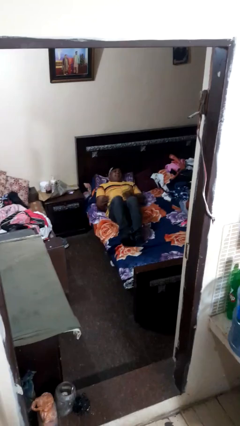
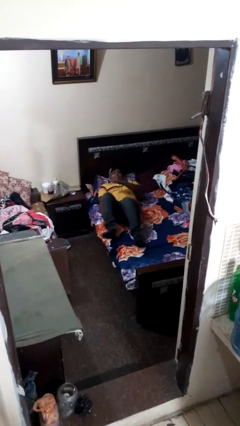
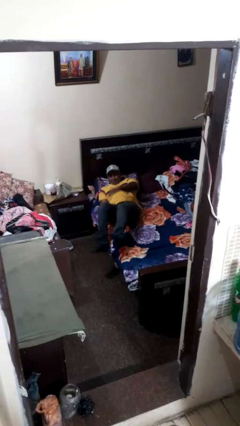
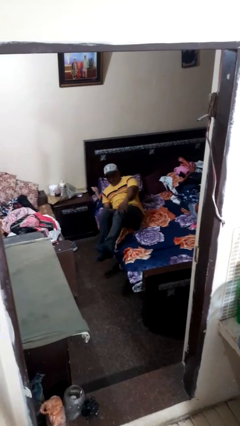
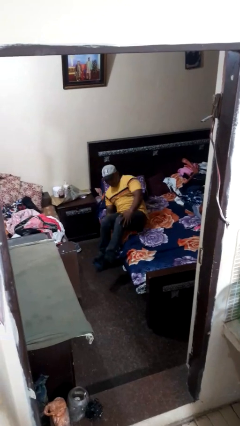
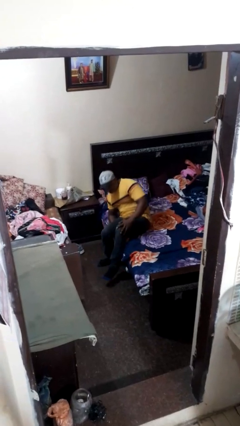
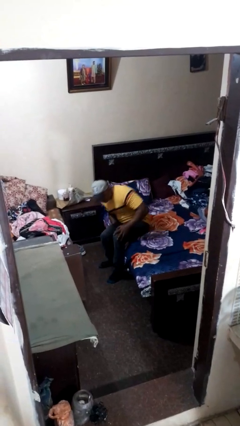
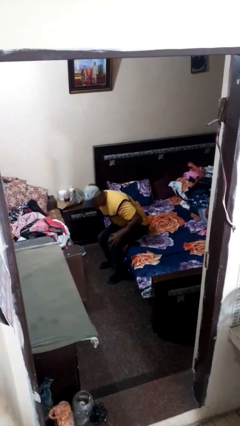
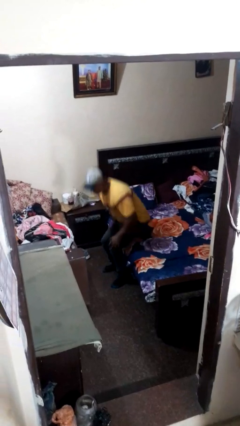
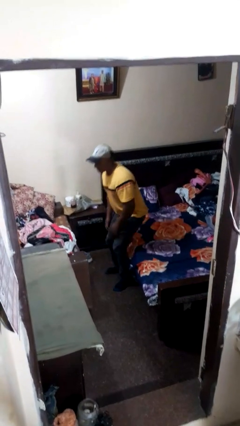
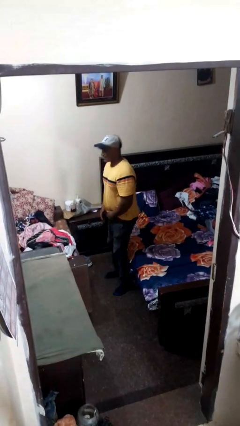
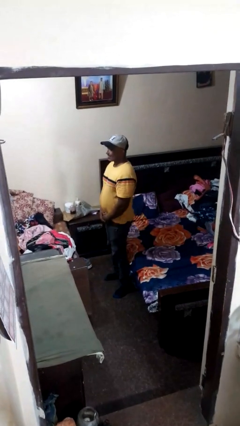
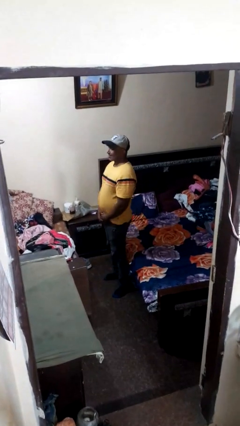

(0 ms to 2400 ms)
person stands up

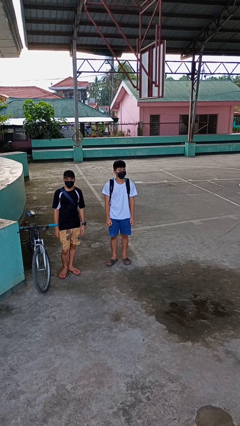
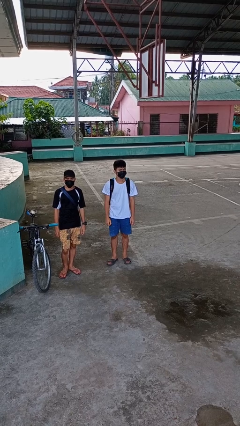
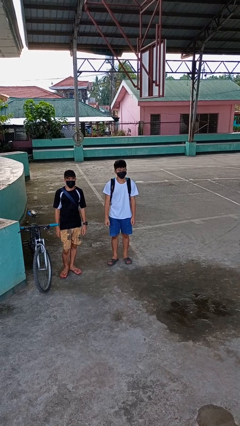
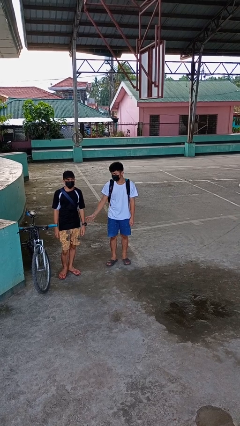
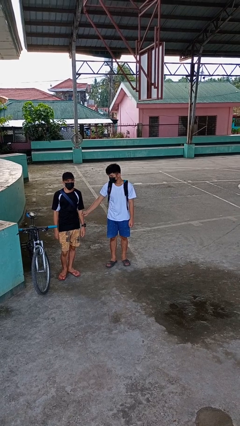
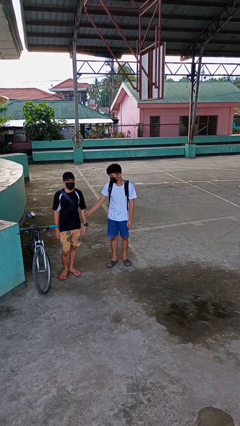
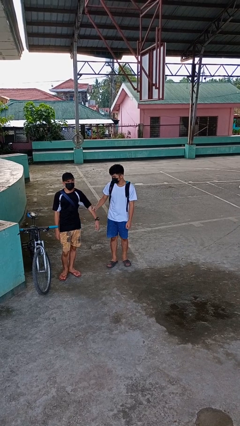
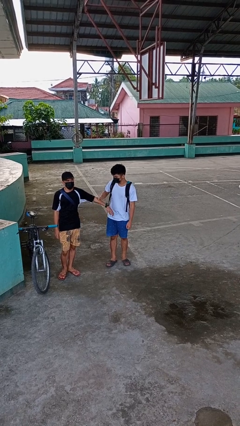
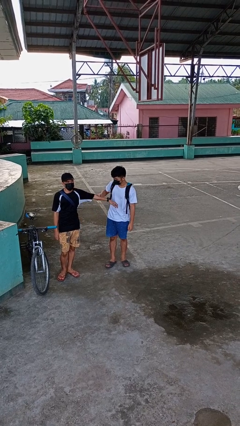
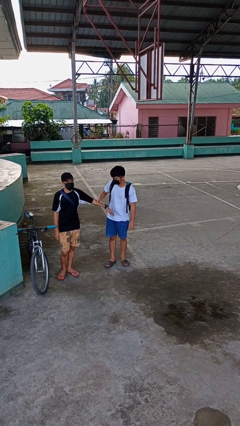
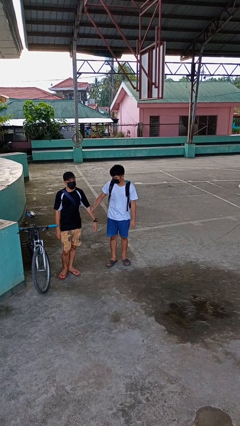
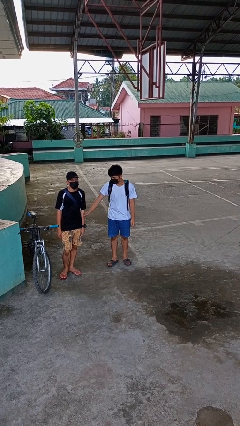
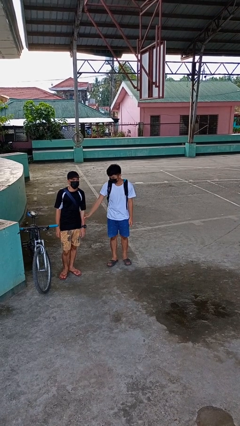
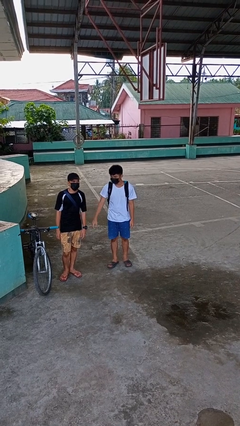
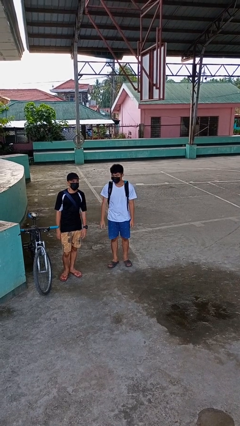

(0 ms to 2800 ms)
person grabs person by forearm

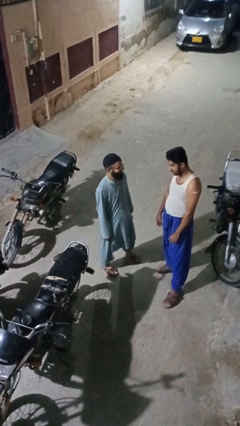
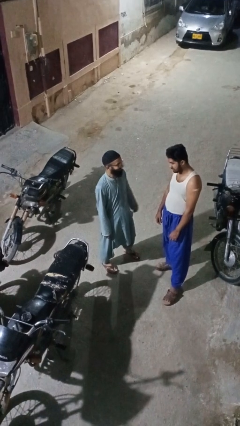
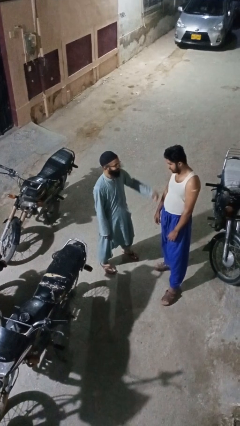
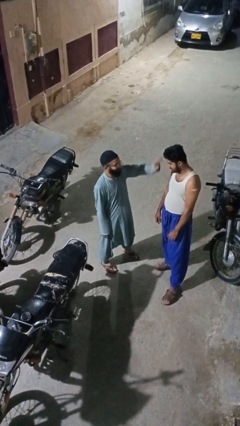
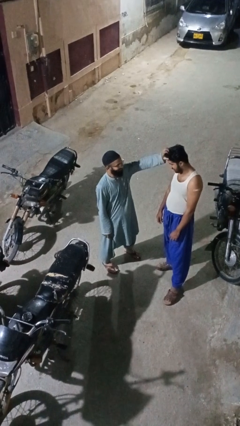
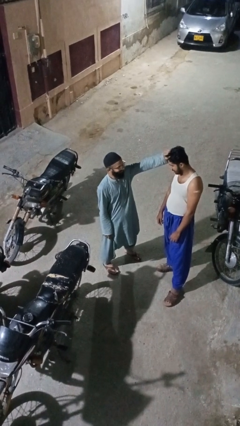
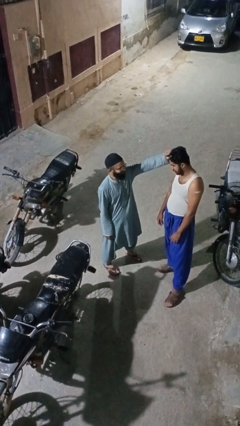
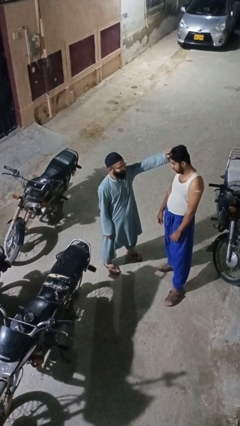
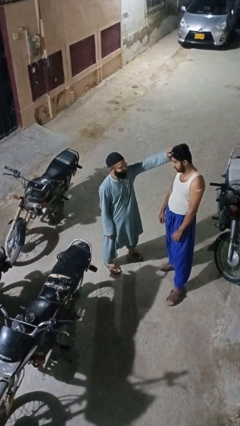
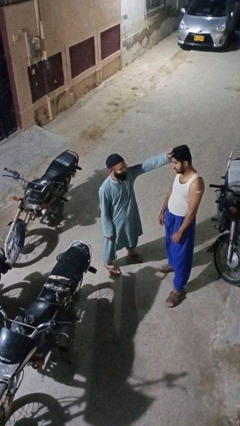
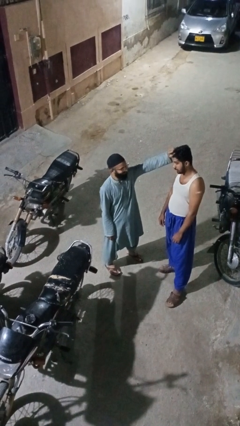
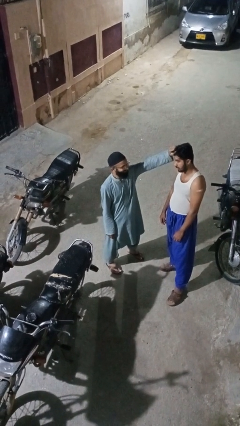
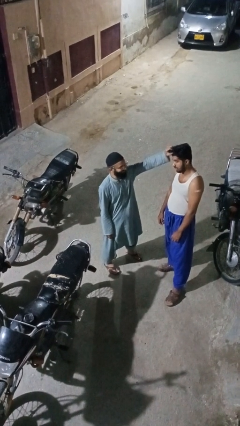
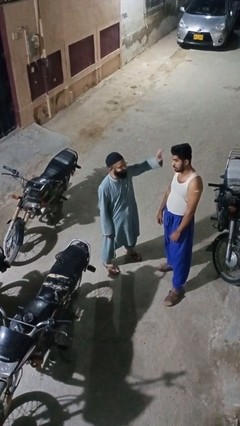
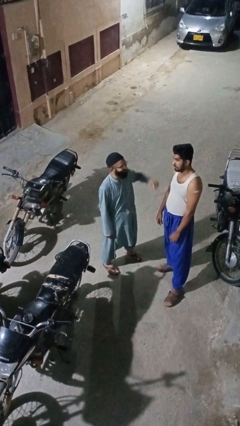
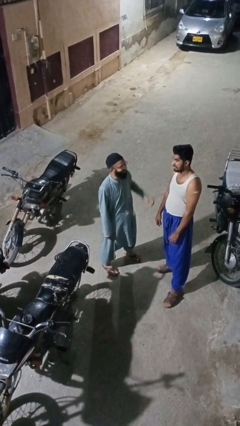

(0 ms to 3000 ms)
person grabs person by hair

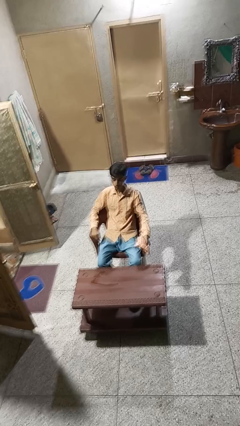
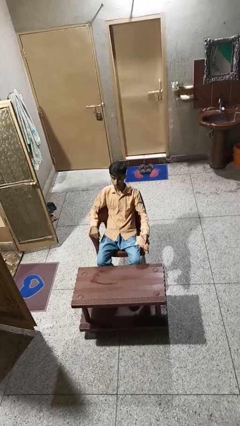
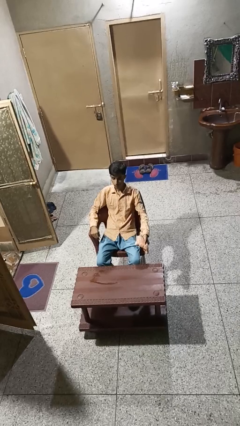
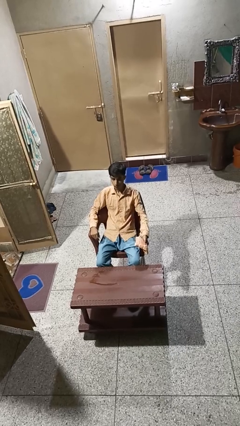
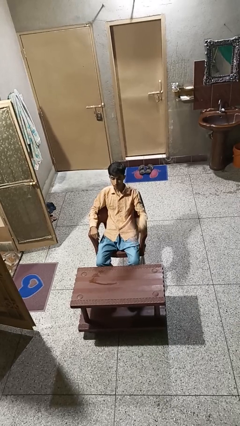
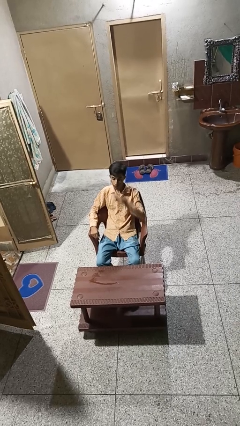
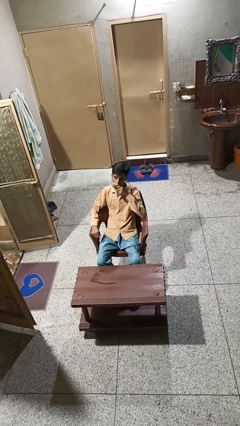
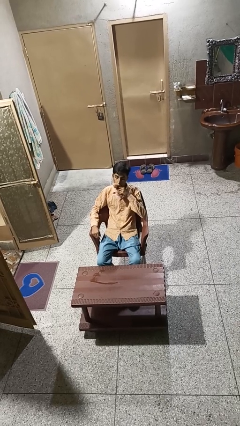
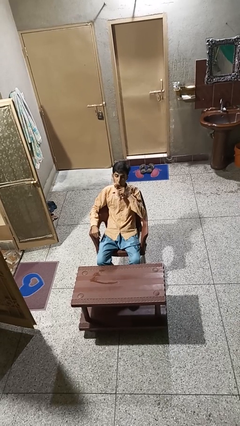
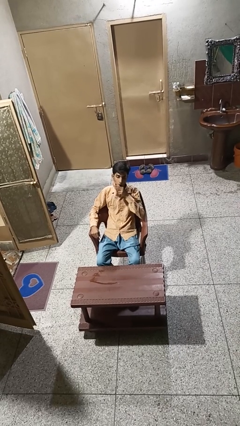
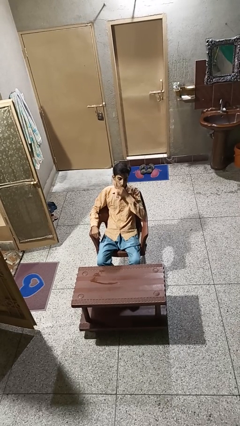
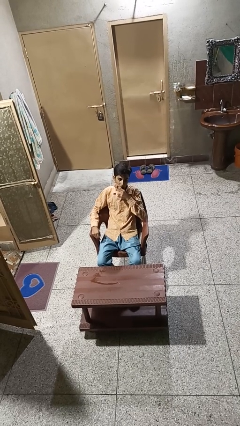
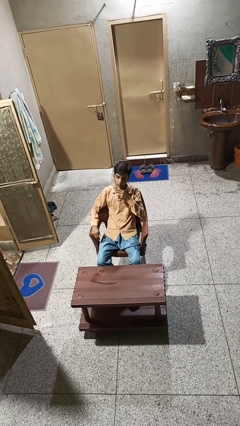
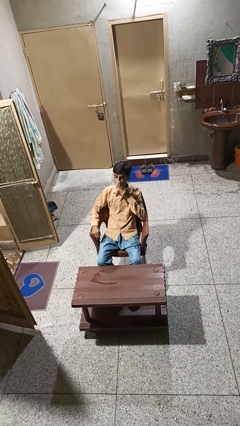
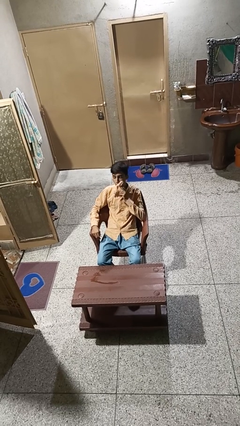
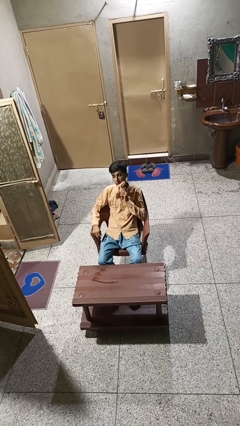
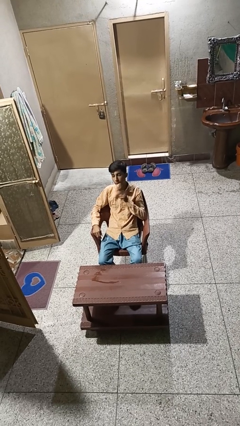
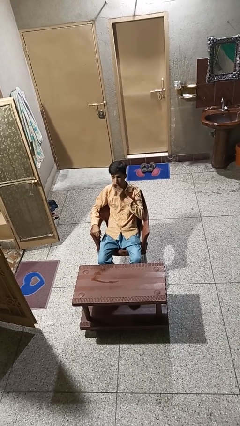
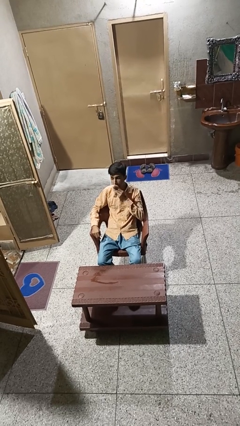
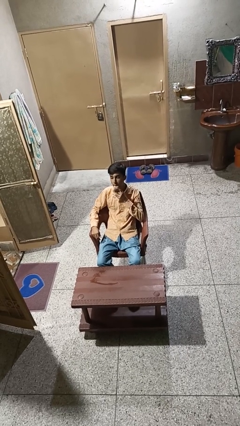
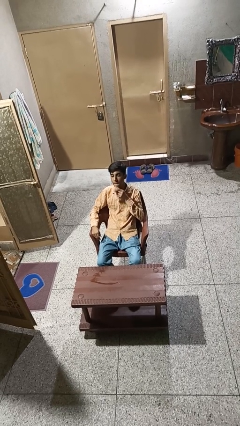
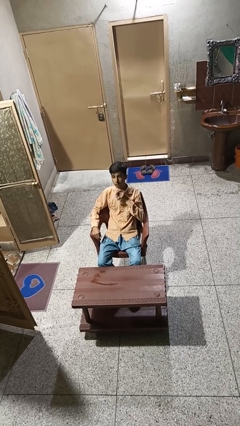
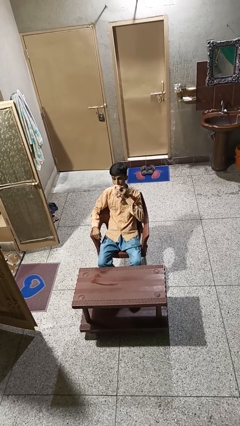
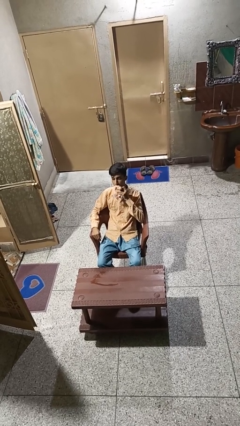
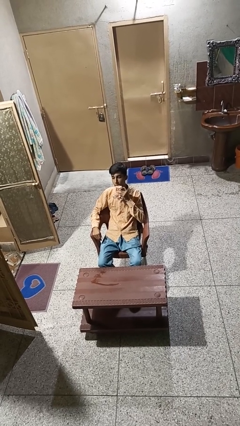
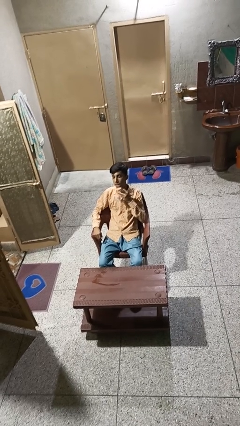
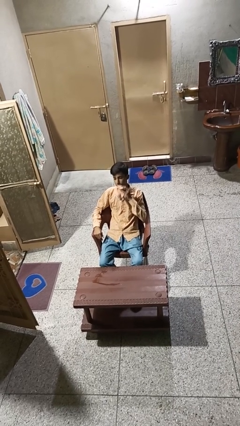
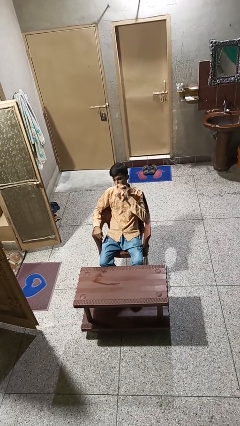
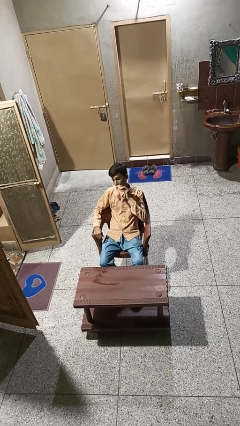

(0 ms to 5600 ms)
person wipes mouth with napkin

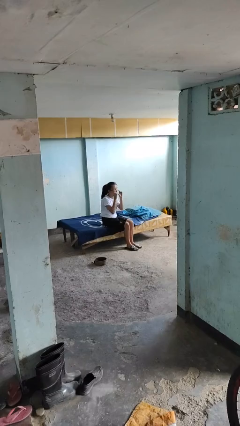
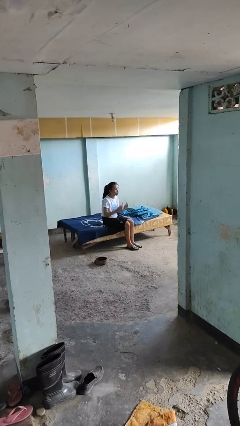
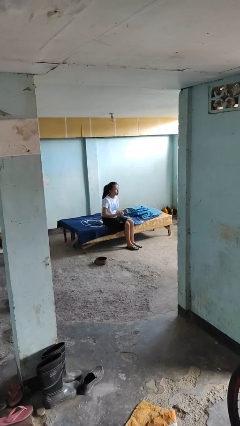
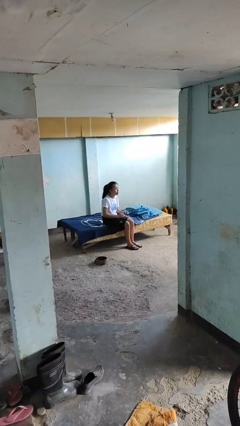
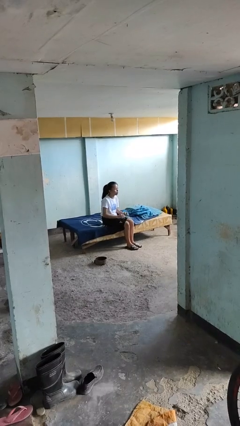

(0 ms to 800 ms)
person takes off glasses

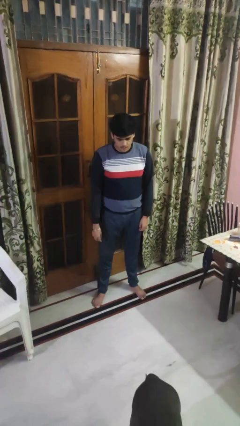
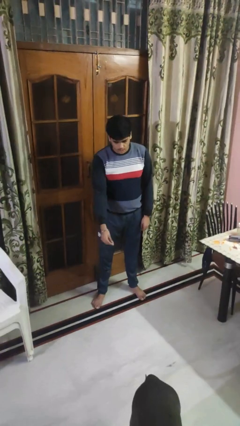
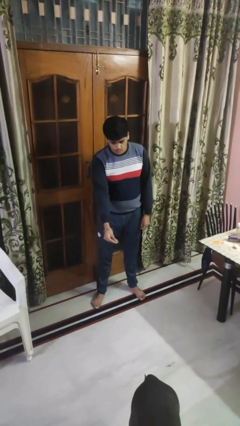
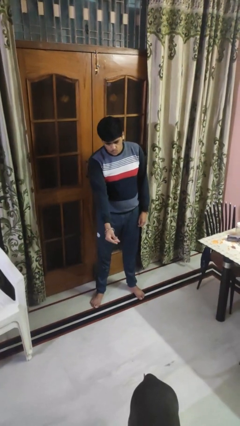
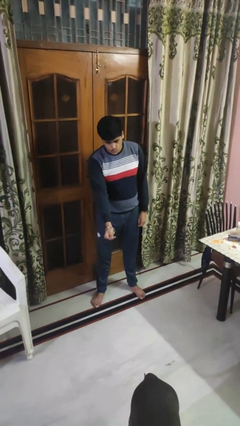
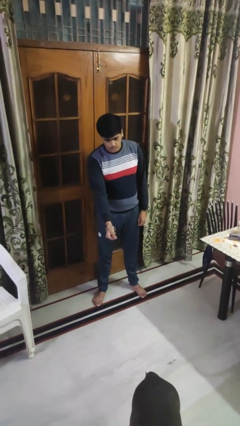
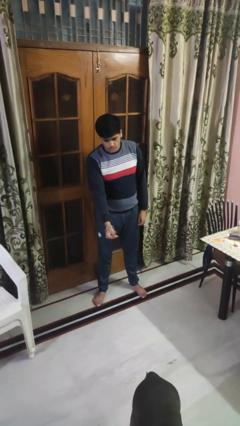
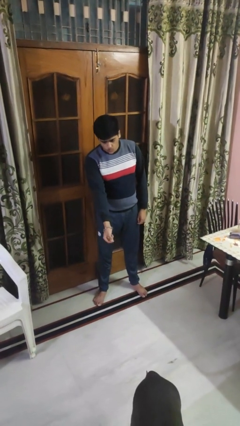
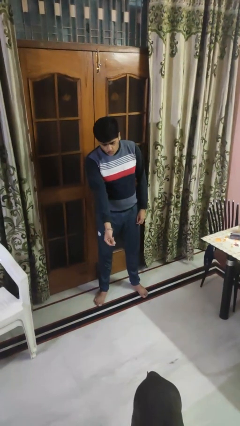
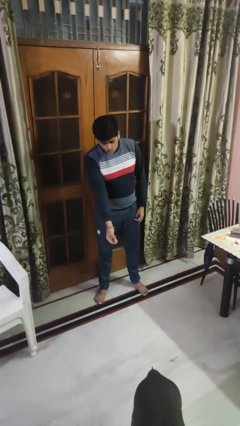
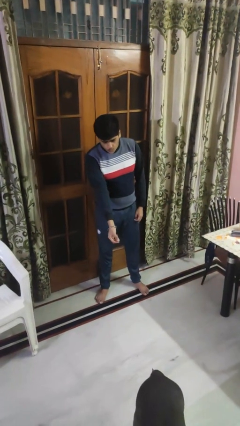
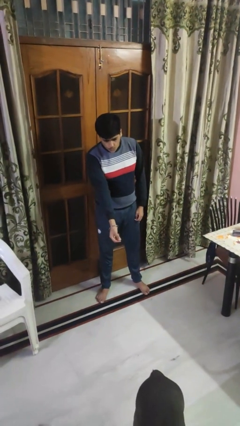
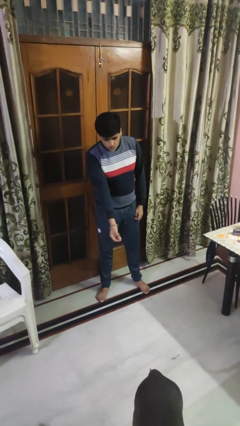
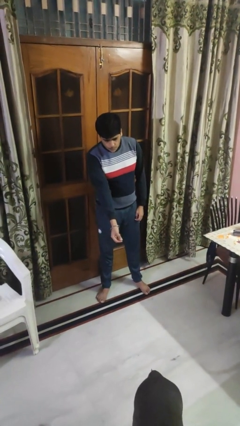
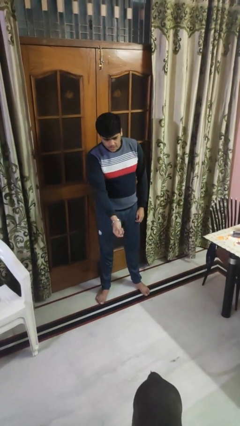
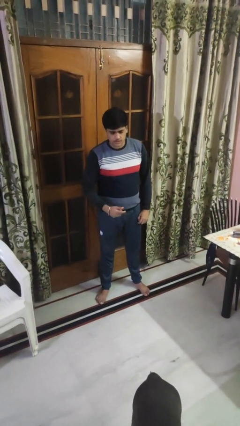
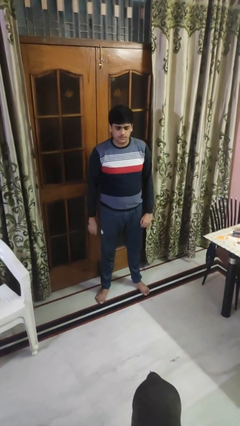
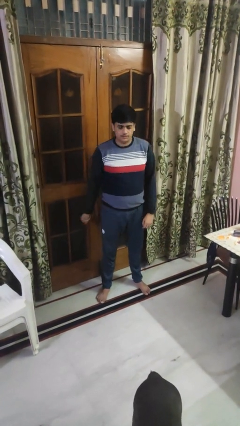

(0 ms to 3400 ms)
person points to dog
